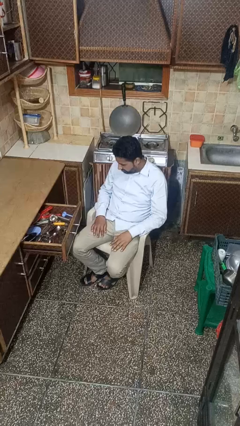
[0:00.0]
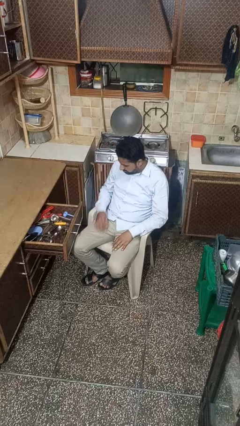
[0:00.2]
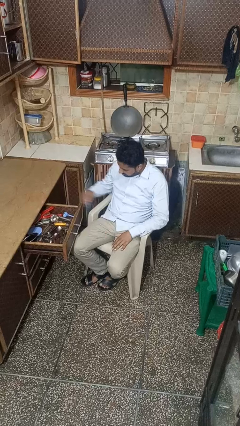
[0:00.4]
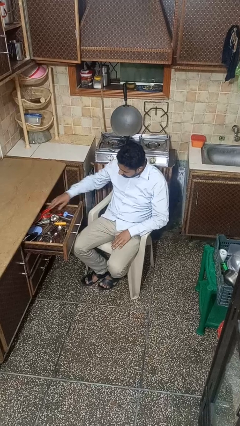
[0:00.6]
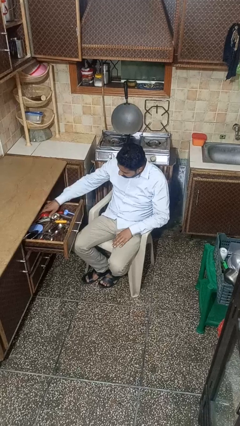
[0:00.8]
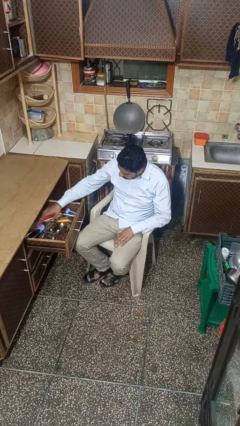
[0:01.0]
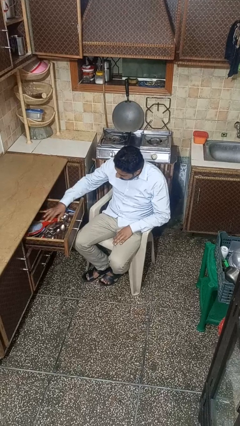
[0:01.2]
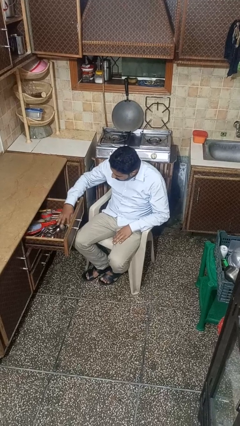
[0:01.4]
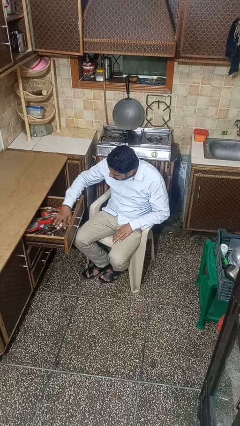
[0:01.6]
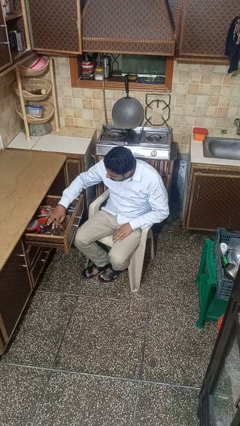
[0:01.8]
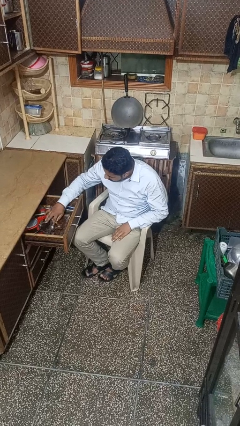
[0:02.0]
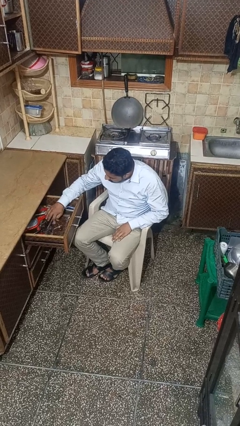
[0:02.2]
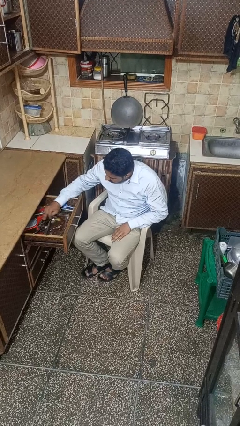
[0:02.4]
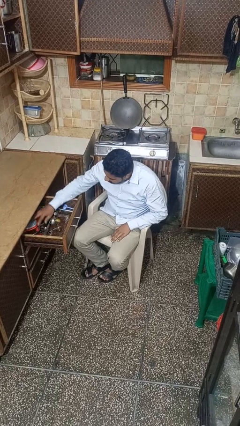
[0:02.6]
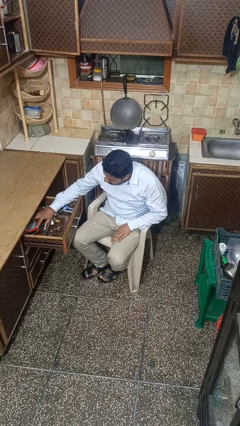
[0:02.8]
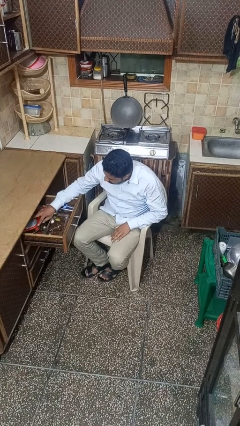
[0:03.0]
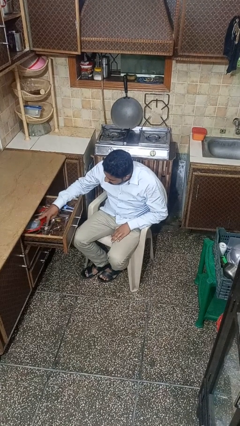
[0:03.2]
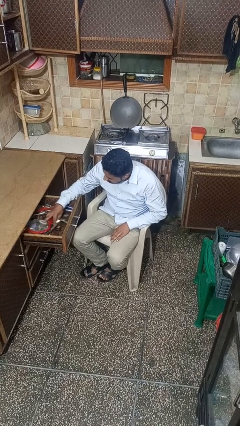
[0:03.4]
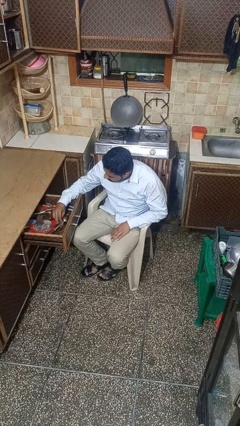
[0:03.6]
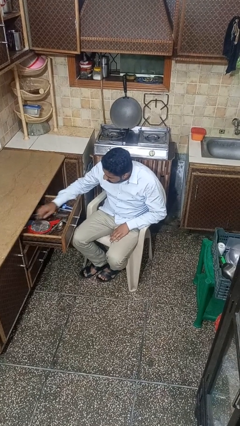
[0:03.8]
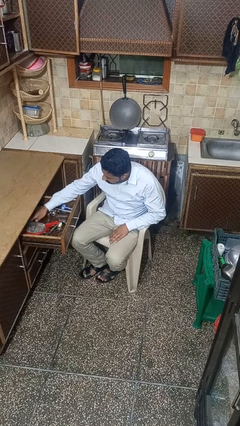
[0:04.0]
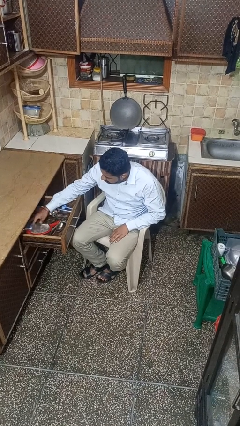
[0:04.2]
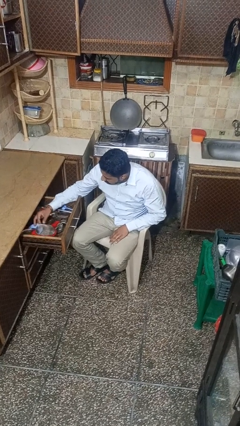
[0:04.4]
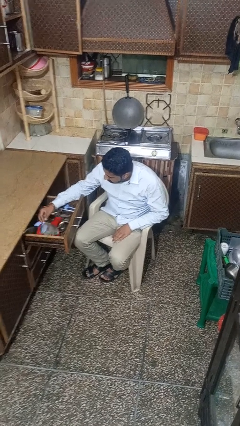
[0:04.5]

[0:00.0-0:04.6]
person searches in kitchen drawer

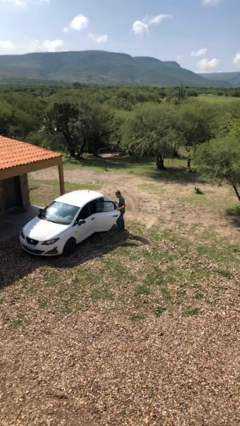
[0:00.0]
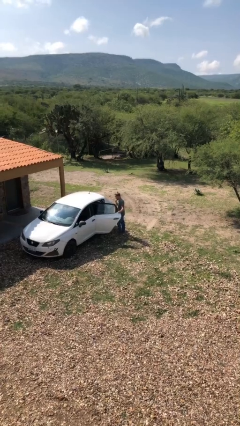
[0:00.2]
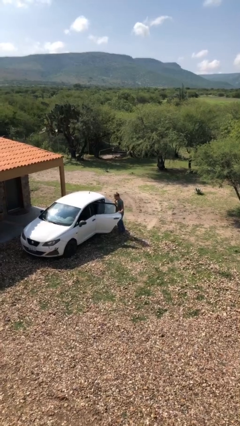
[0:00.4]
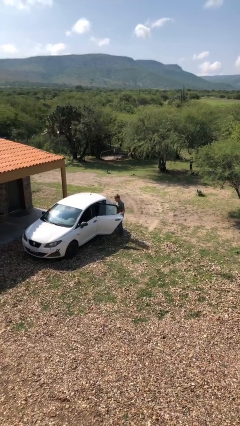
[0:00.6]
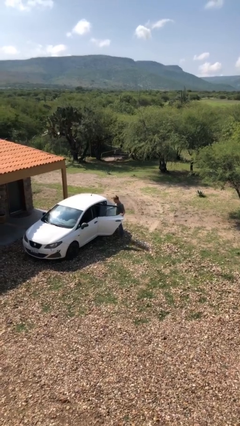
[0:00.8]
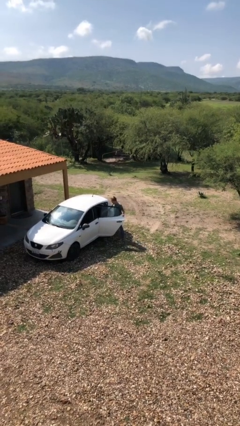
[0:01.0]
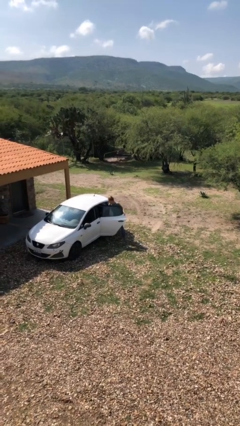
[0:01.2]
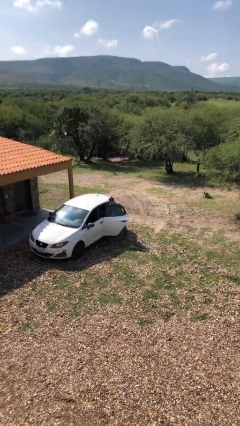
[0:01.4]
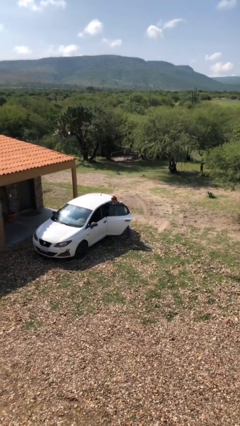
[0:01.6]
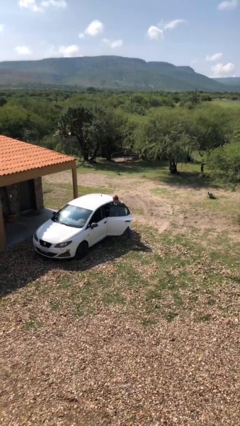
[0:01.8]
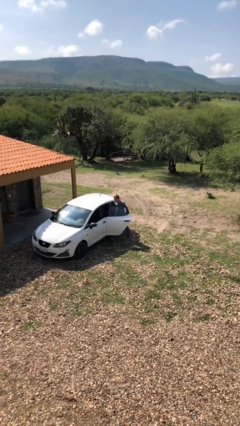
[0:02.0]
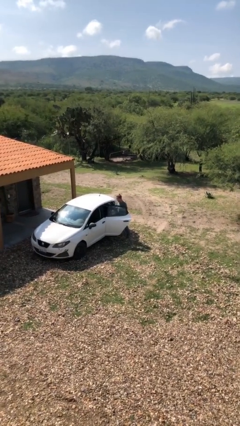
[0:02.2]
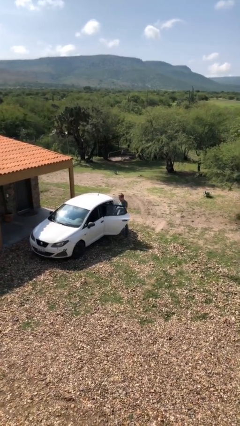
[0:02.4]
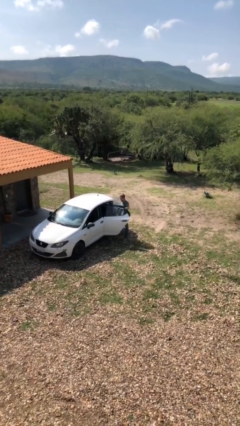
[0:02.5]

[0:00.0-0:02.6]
person unloads car

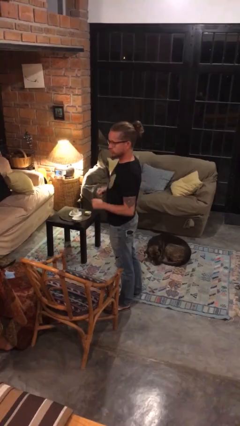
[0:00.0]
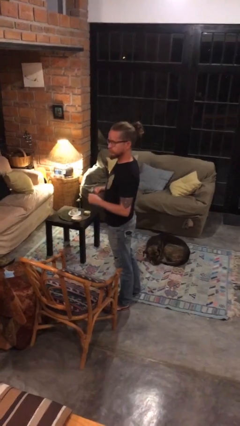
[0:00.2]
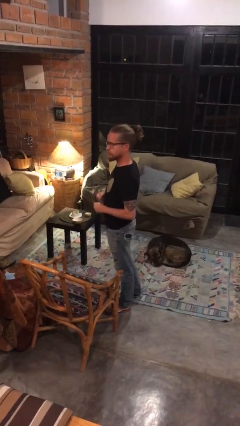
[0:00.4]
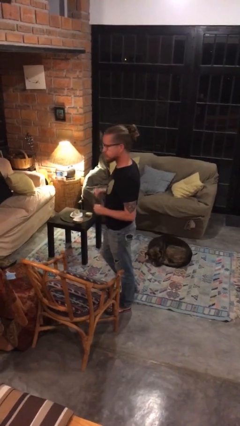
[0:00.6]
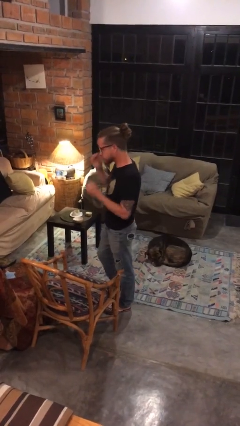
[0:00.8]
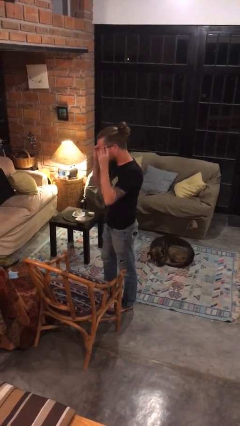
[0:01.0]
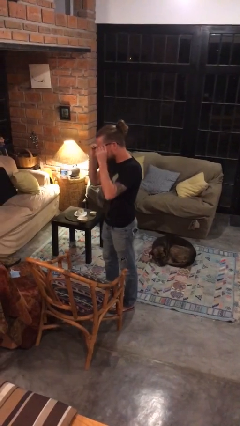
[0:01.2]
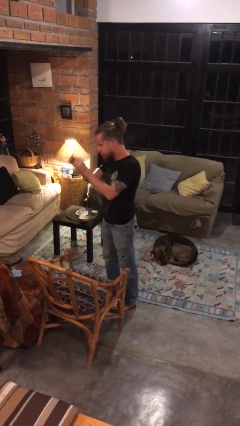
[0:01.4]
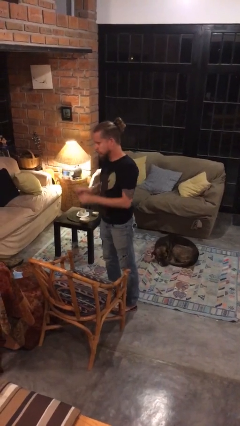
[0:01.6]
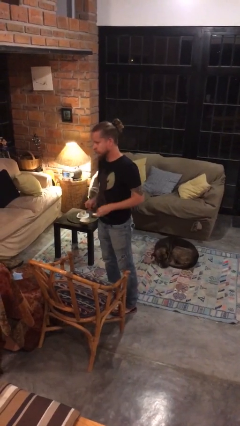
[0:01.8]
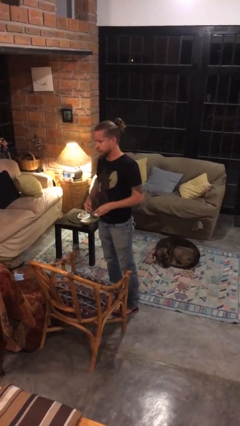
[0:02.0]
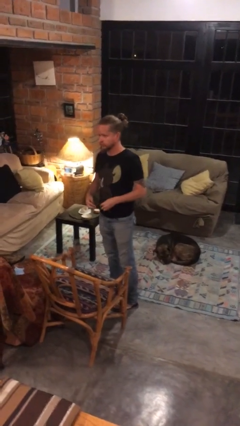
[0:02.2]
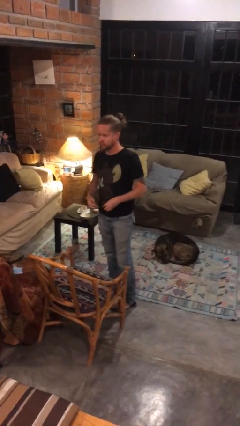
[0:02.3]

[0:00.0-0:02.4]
person takes off glasses

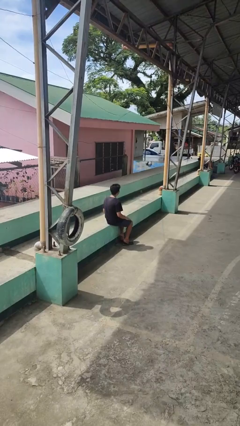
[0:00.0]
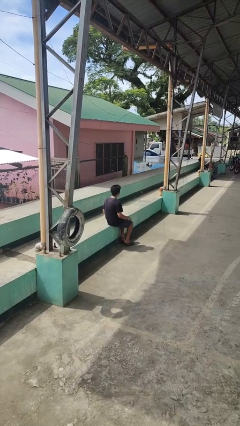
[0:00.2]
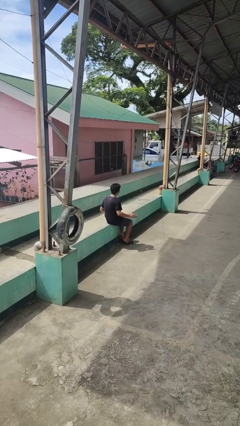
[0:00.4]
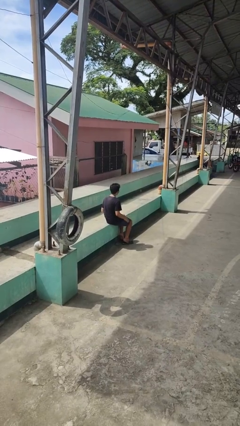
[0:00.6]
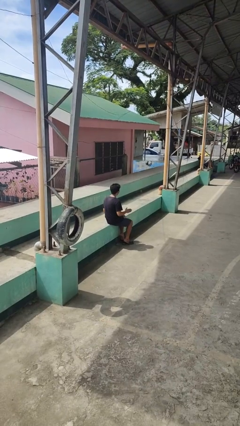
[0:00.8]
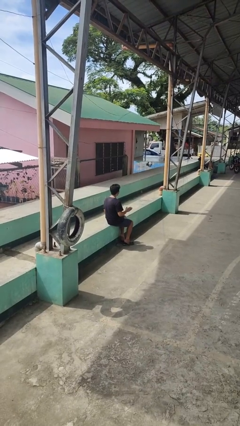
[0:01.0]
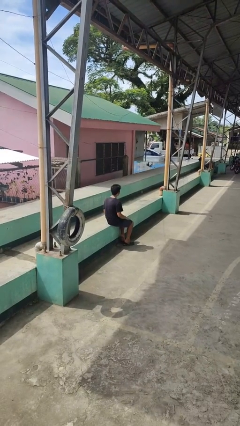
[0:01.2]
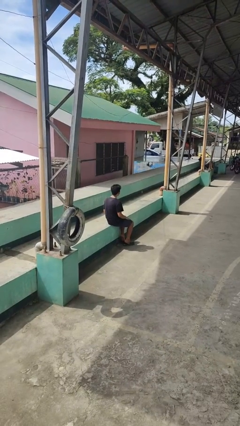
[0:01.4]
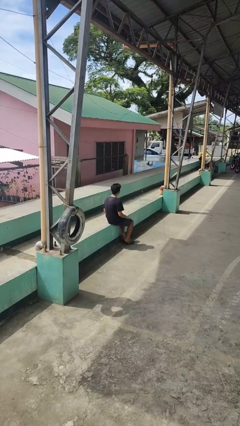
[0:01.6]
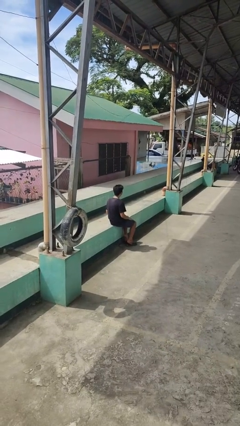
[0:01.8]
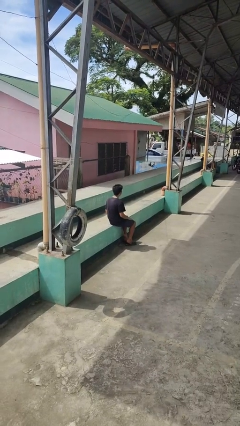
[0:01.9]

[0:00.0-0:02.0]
person slaps hands on thighs

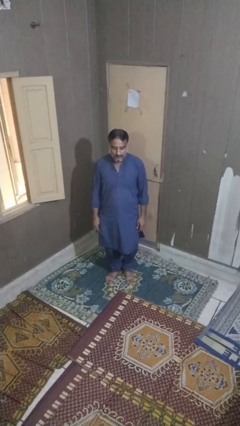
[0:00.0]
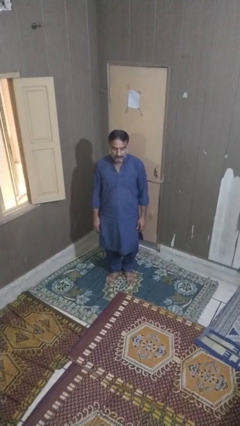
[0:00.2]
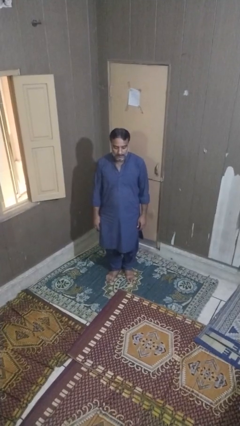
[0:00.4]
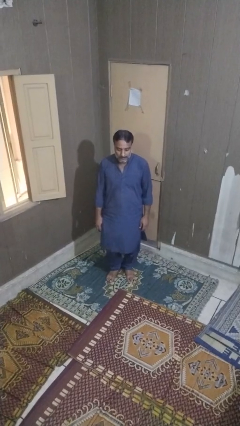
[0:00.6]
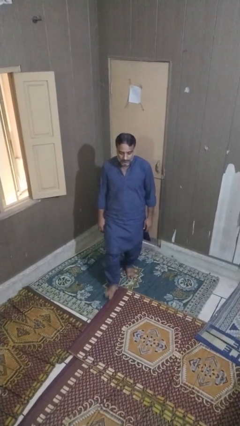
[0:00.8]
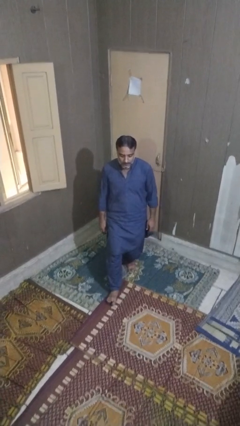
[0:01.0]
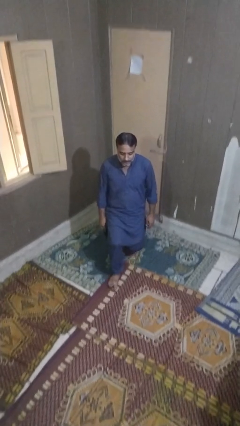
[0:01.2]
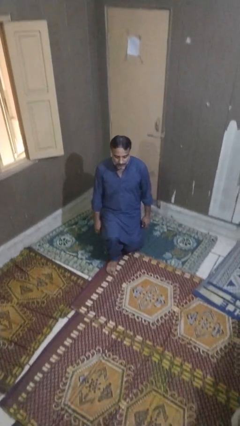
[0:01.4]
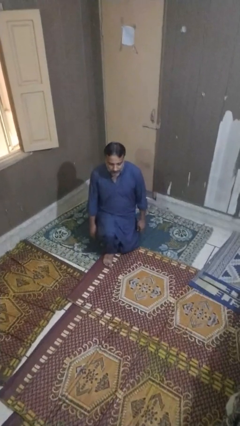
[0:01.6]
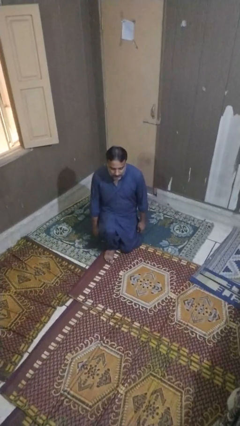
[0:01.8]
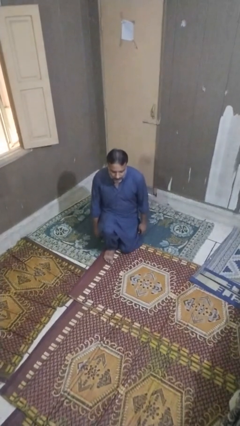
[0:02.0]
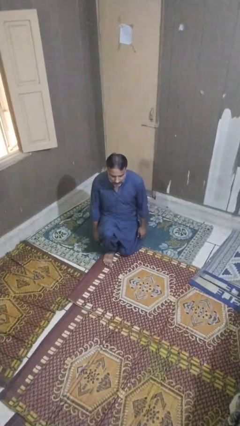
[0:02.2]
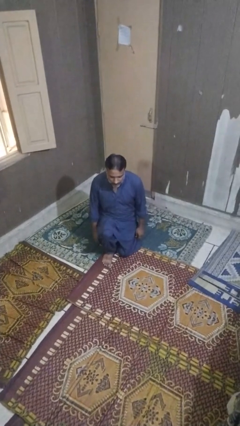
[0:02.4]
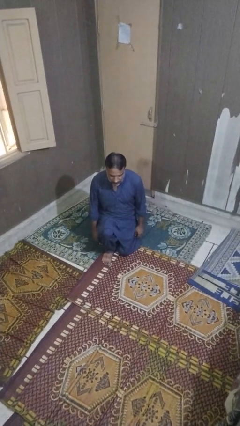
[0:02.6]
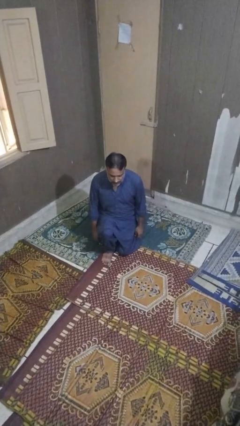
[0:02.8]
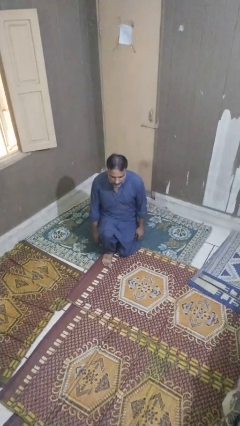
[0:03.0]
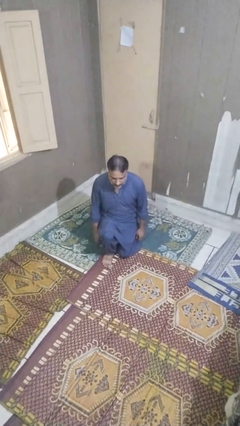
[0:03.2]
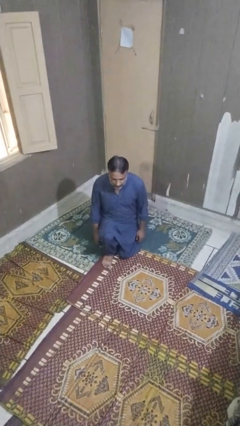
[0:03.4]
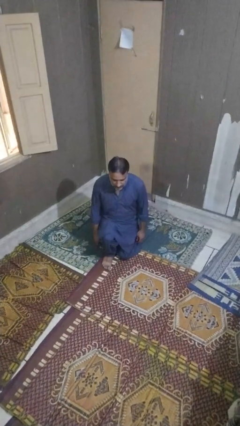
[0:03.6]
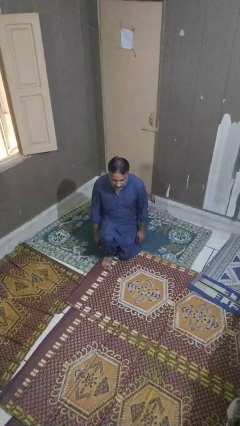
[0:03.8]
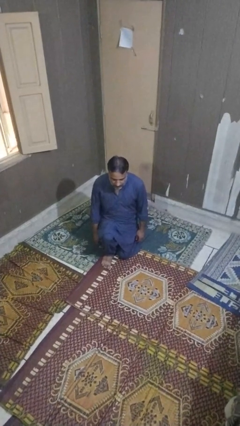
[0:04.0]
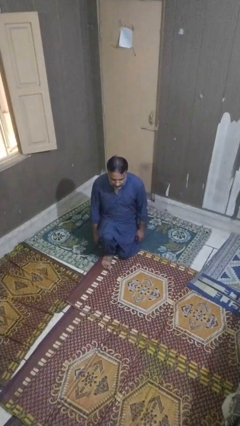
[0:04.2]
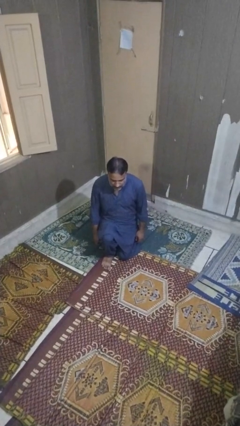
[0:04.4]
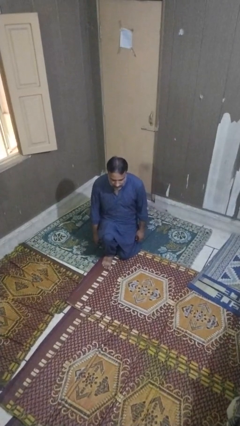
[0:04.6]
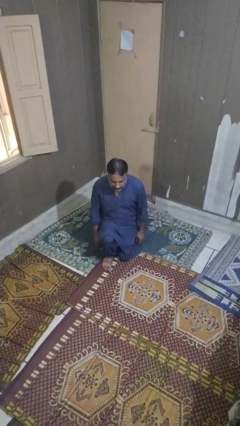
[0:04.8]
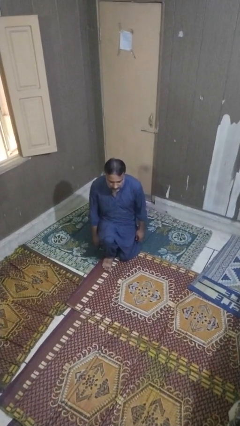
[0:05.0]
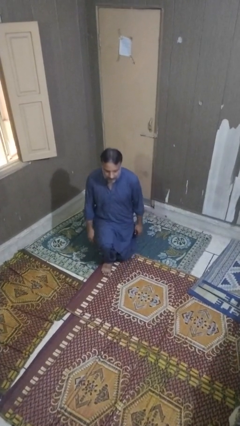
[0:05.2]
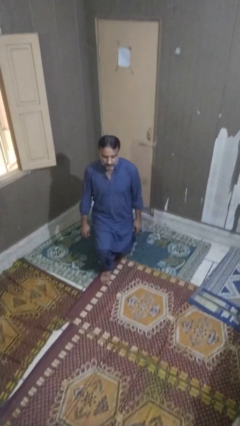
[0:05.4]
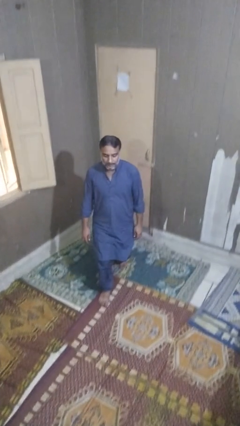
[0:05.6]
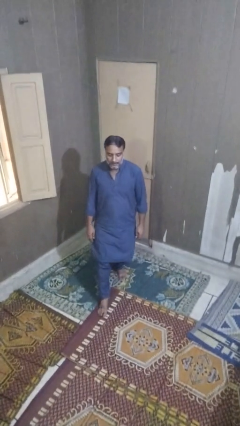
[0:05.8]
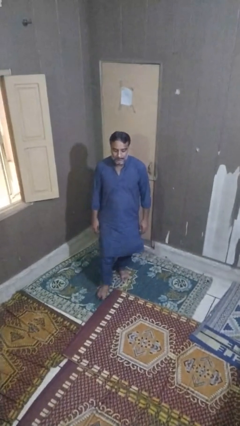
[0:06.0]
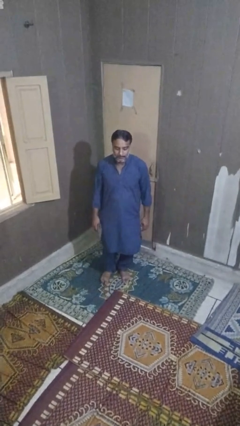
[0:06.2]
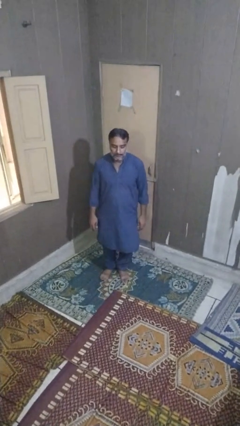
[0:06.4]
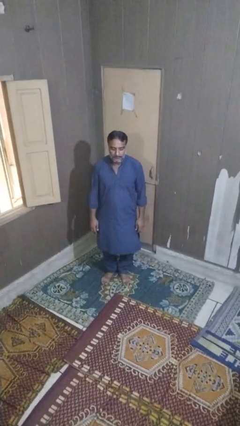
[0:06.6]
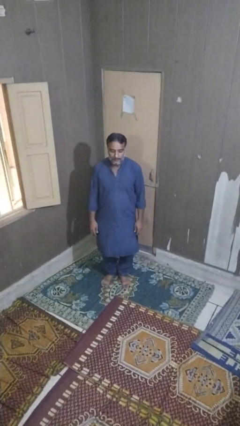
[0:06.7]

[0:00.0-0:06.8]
person exercises with lunges
